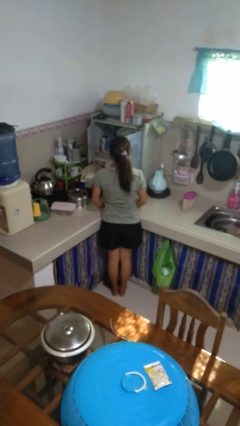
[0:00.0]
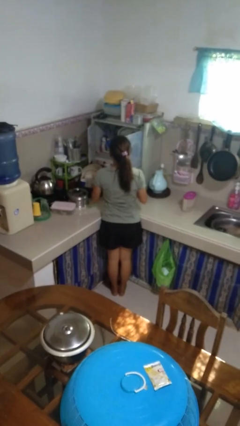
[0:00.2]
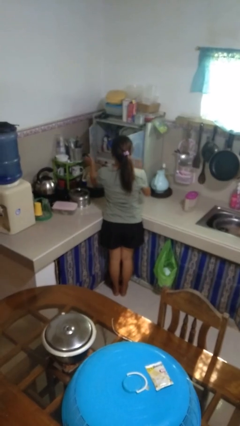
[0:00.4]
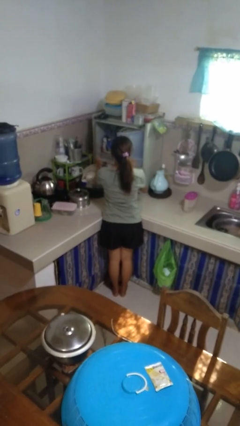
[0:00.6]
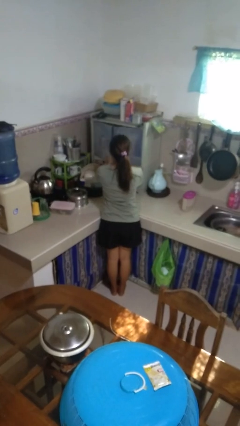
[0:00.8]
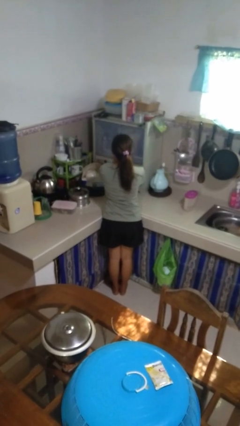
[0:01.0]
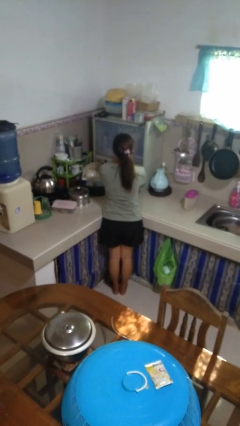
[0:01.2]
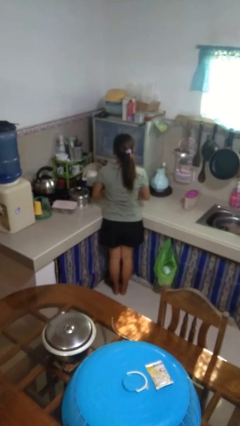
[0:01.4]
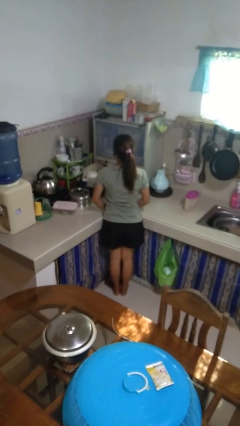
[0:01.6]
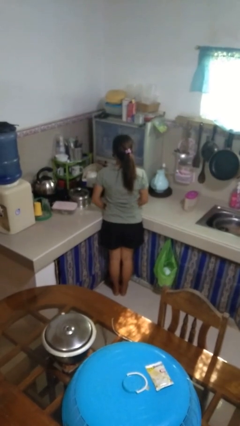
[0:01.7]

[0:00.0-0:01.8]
person closes kitchen drawer

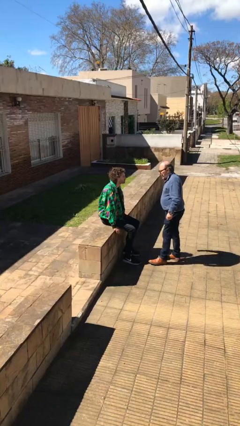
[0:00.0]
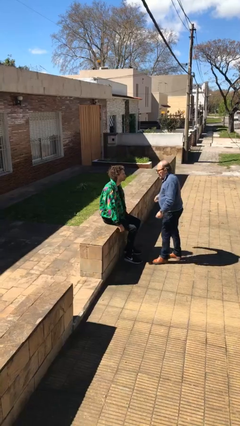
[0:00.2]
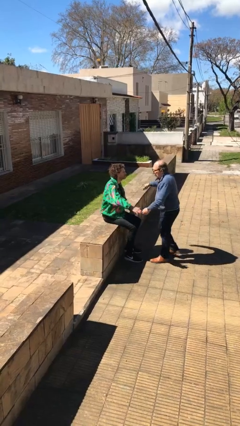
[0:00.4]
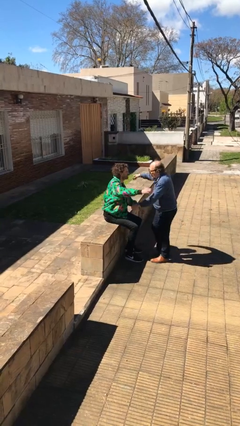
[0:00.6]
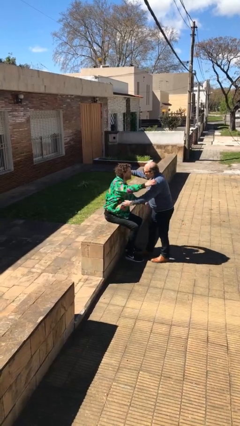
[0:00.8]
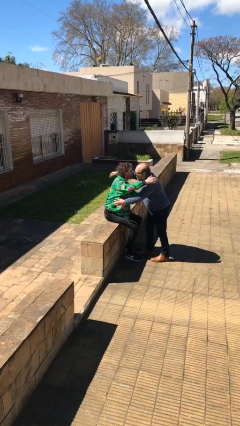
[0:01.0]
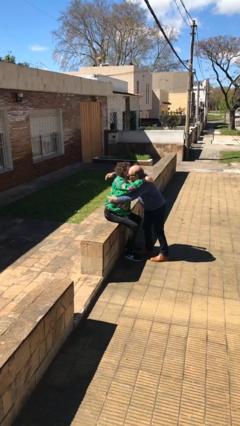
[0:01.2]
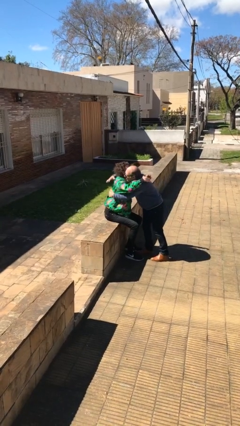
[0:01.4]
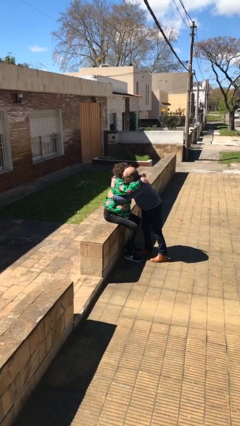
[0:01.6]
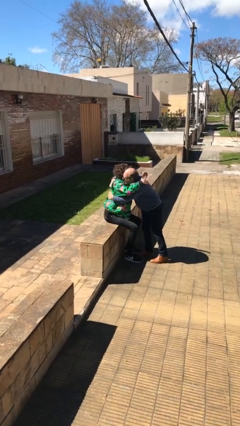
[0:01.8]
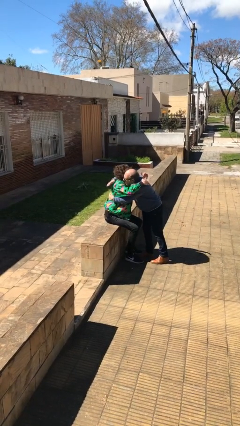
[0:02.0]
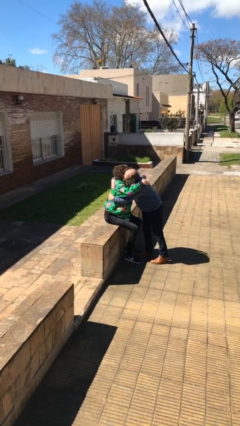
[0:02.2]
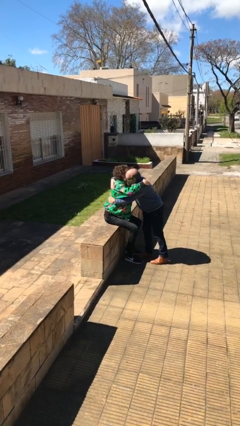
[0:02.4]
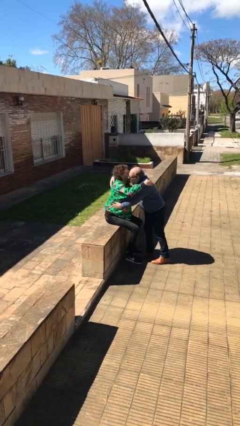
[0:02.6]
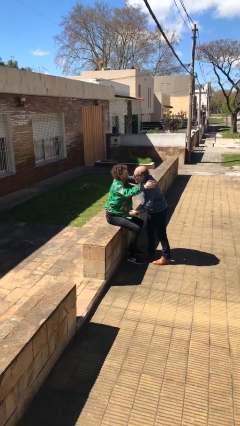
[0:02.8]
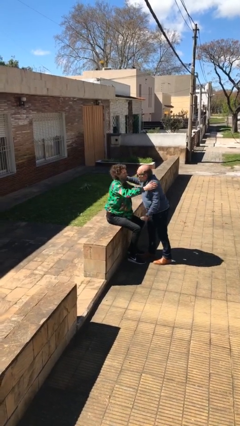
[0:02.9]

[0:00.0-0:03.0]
person embraces person

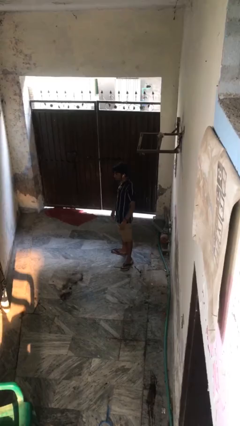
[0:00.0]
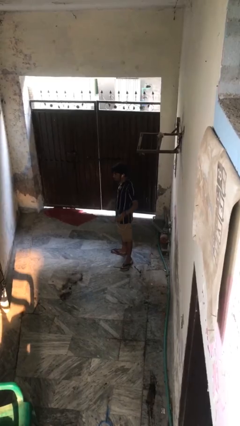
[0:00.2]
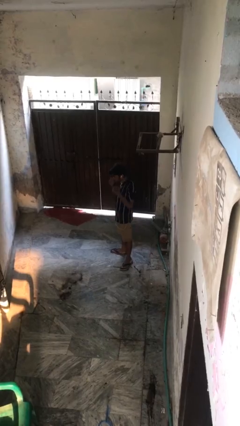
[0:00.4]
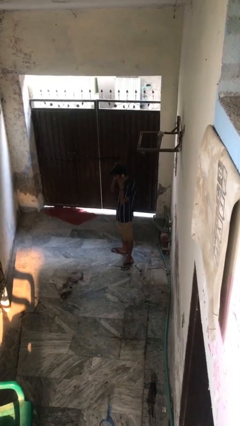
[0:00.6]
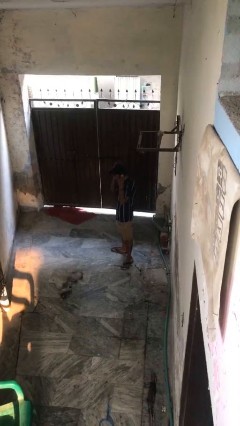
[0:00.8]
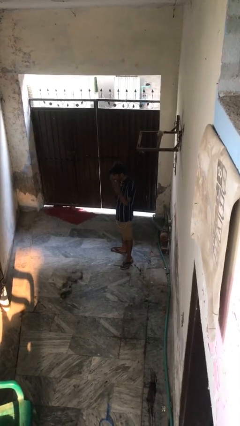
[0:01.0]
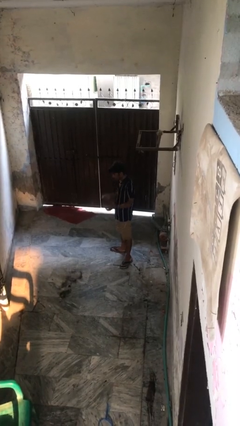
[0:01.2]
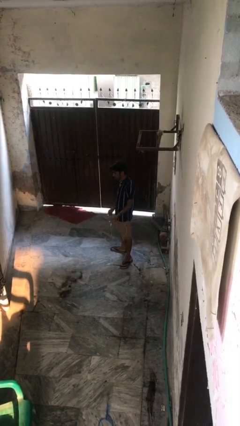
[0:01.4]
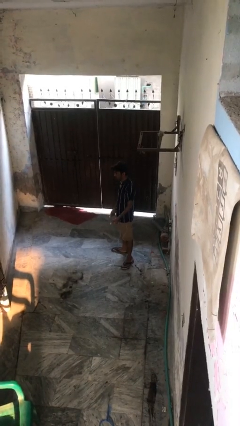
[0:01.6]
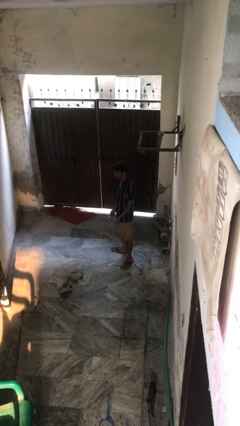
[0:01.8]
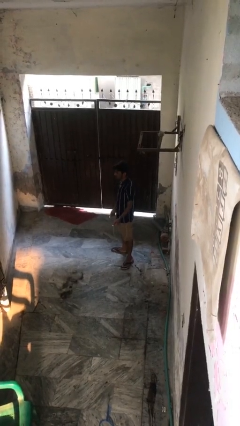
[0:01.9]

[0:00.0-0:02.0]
person takes off headphones

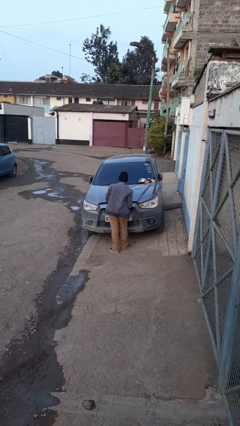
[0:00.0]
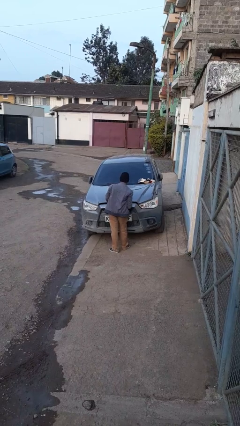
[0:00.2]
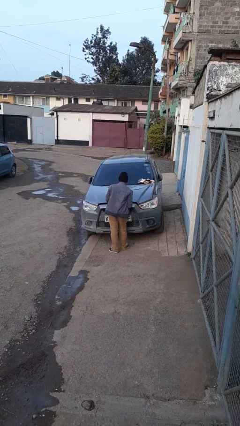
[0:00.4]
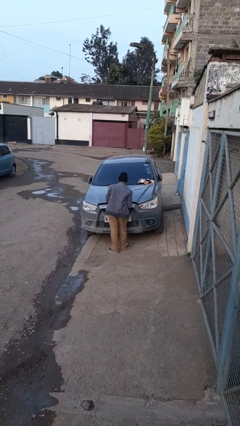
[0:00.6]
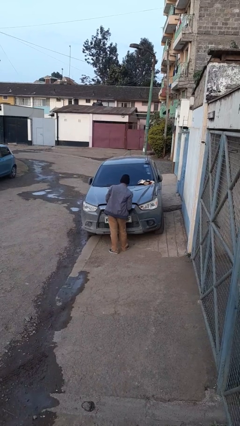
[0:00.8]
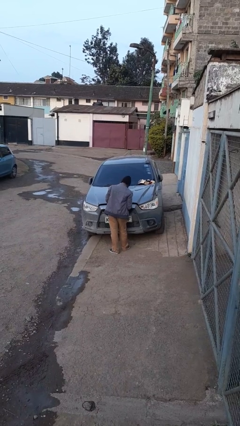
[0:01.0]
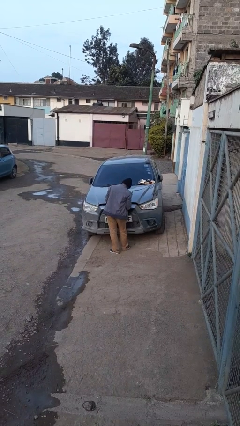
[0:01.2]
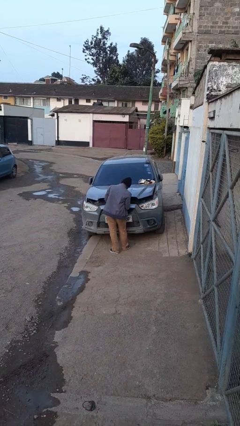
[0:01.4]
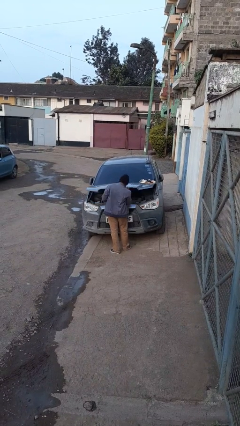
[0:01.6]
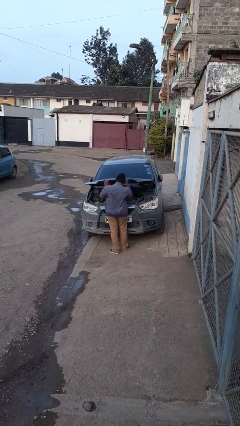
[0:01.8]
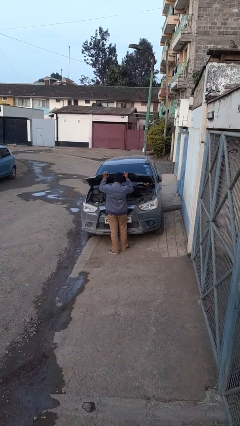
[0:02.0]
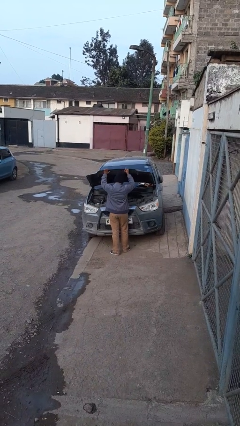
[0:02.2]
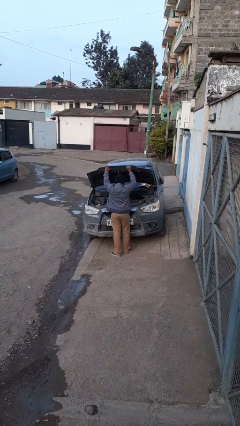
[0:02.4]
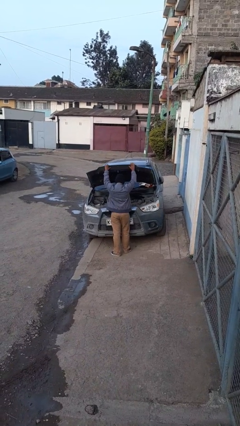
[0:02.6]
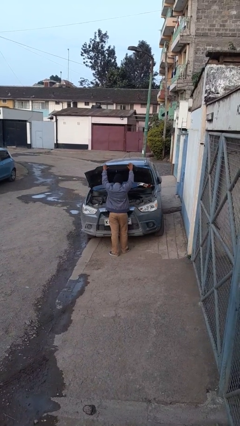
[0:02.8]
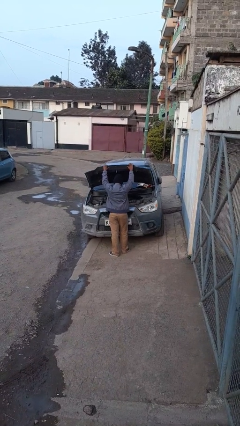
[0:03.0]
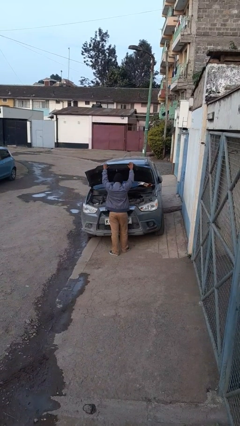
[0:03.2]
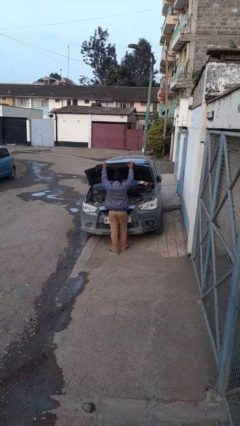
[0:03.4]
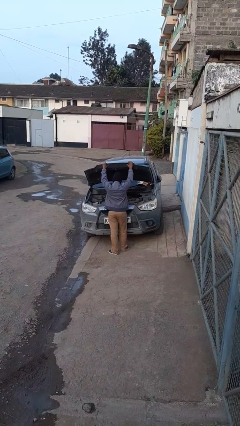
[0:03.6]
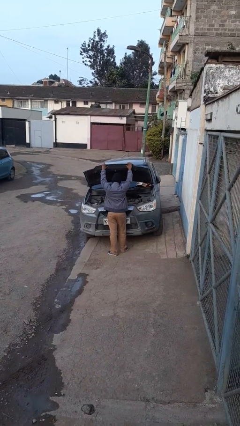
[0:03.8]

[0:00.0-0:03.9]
person opens car hood

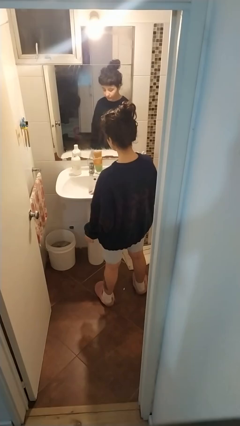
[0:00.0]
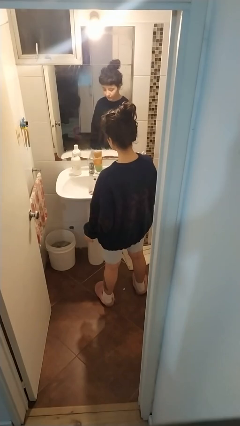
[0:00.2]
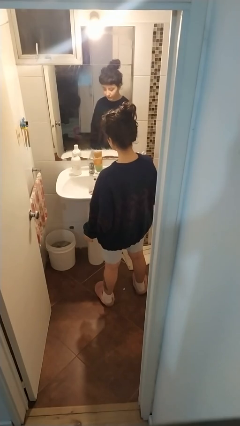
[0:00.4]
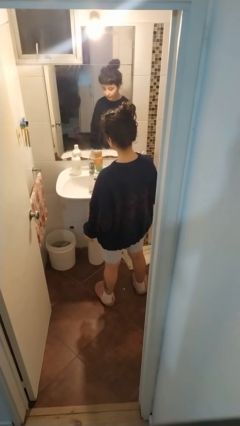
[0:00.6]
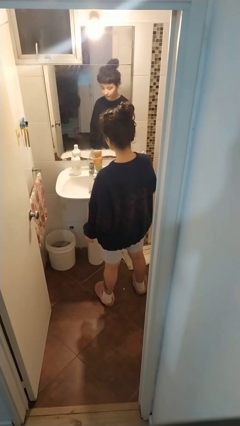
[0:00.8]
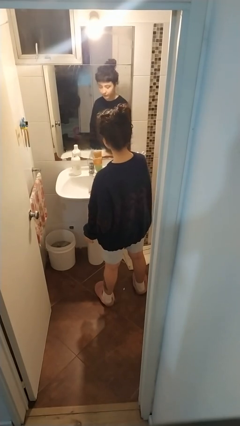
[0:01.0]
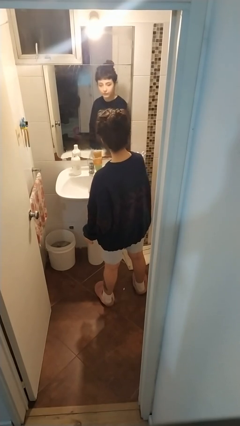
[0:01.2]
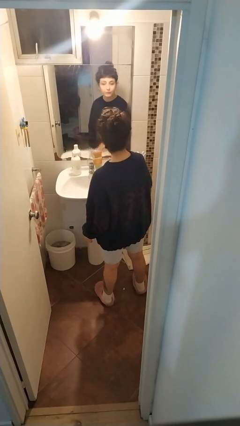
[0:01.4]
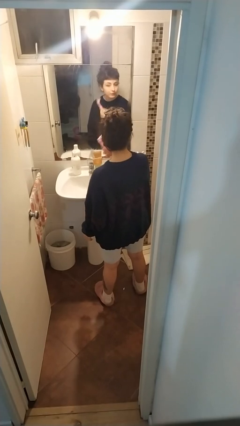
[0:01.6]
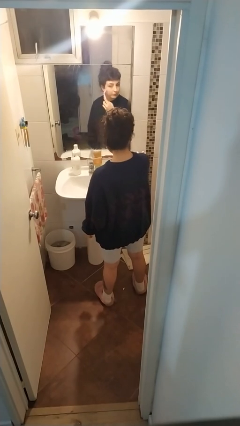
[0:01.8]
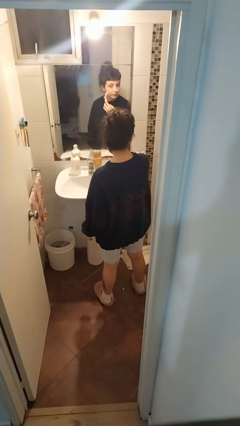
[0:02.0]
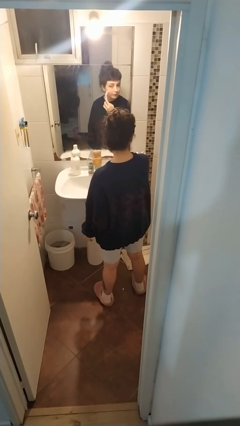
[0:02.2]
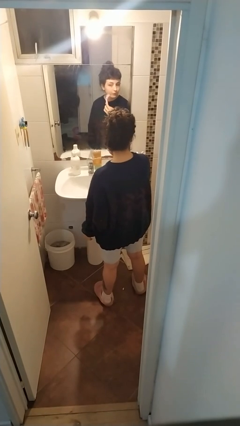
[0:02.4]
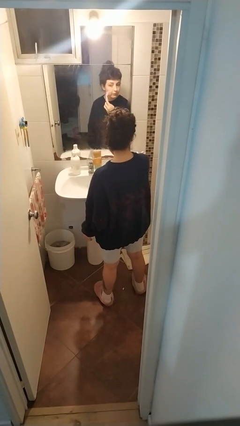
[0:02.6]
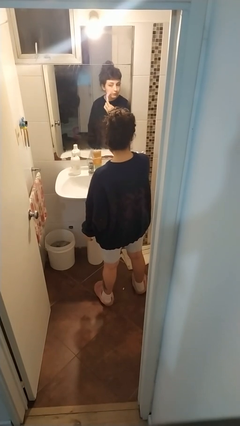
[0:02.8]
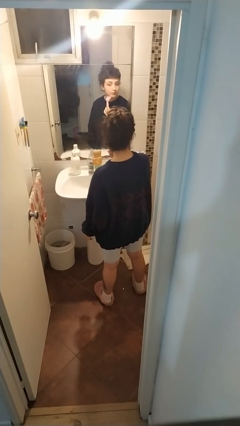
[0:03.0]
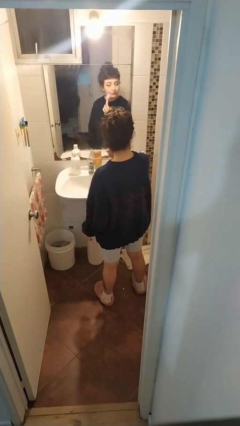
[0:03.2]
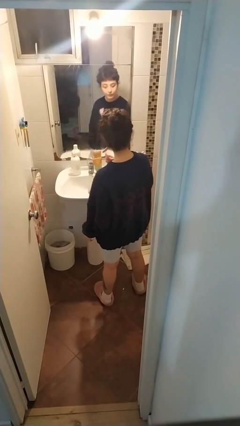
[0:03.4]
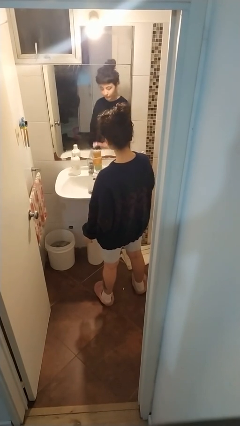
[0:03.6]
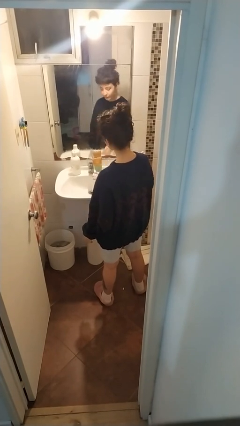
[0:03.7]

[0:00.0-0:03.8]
person shaves face

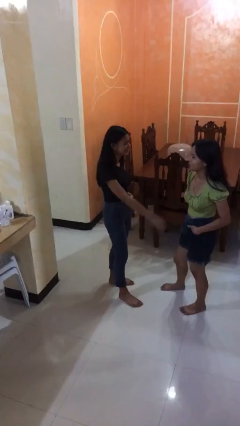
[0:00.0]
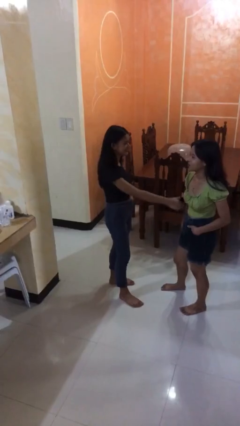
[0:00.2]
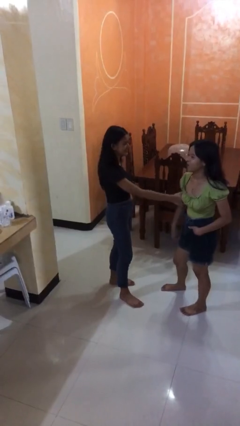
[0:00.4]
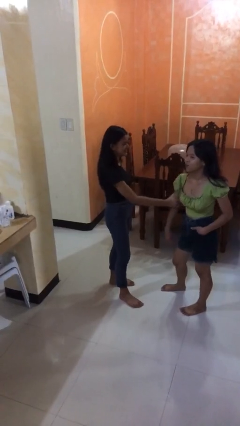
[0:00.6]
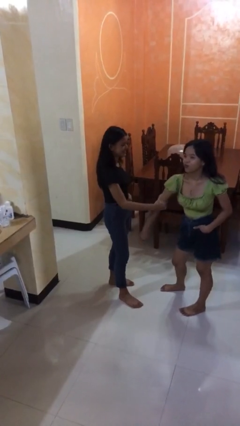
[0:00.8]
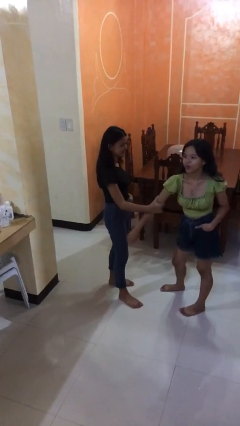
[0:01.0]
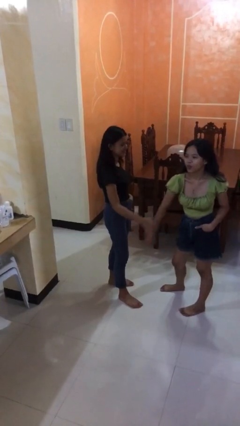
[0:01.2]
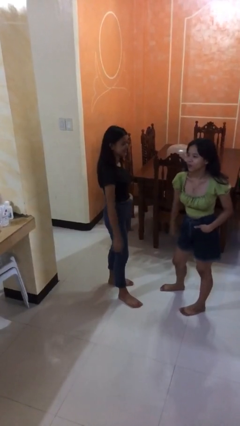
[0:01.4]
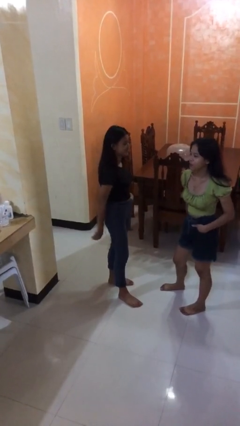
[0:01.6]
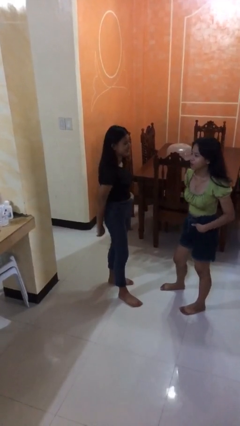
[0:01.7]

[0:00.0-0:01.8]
person grabs person by bicep

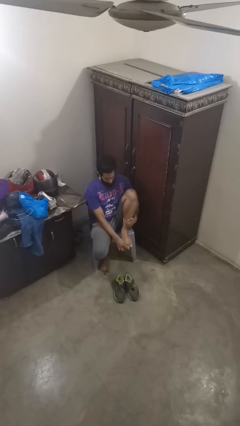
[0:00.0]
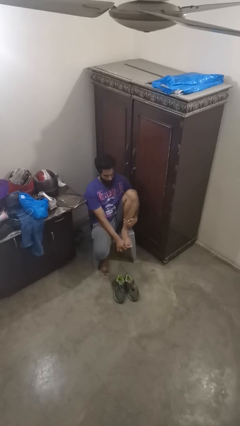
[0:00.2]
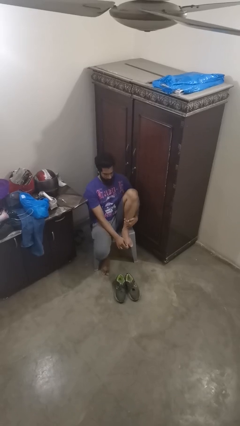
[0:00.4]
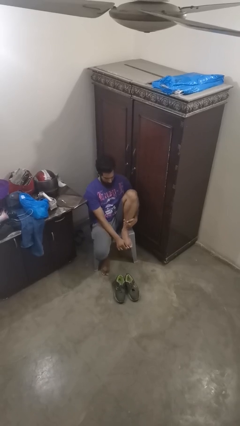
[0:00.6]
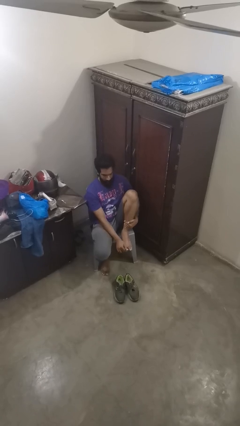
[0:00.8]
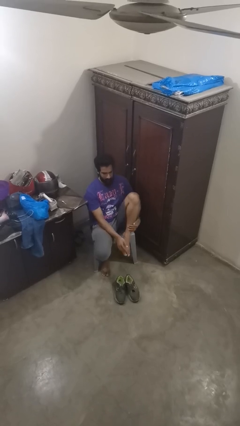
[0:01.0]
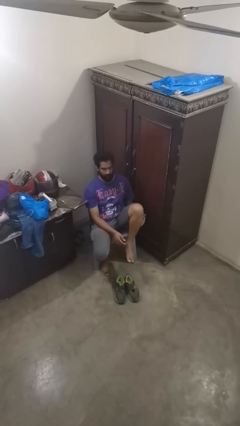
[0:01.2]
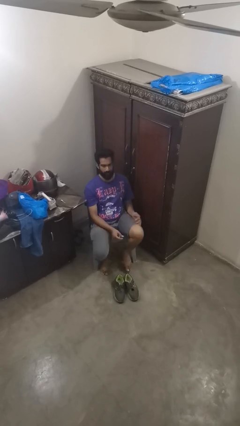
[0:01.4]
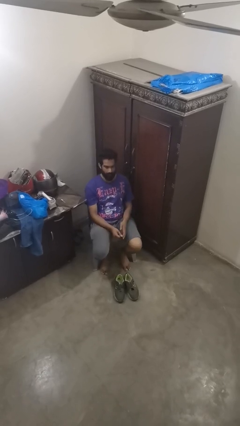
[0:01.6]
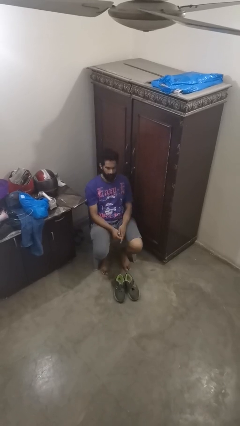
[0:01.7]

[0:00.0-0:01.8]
person rubs foot
